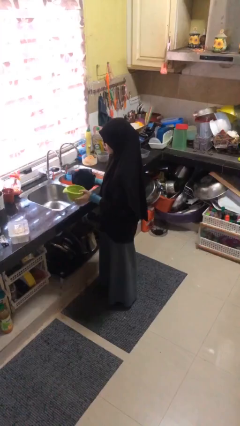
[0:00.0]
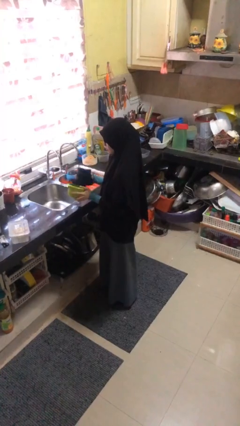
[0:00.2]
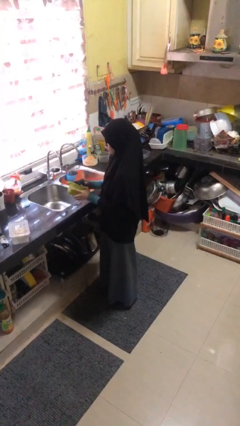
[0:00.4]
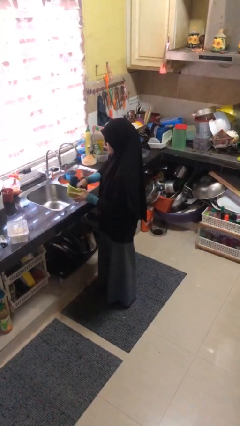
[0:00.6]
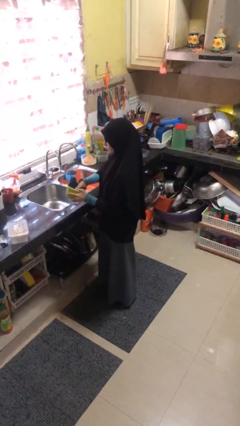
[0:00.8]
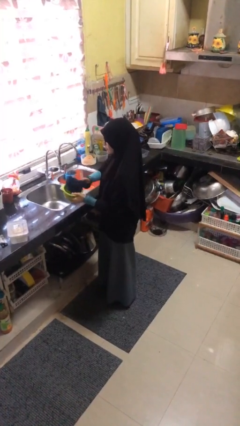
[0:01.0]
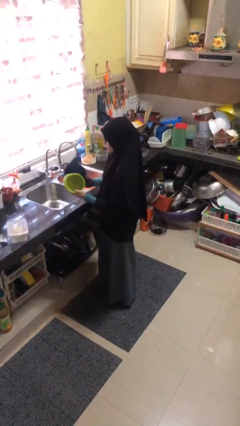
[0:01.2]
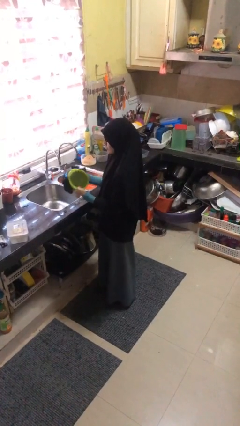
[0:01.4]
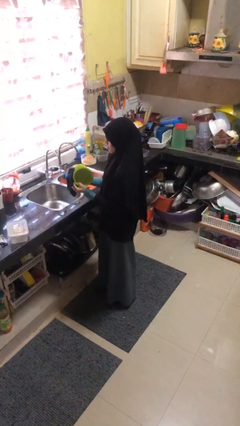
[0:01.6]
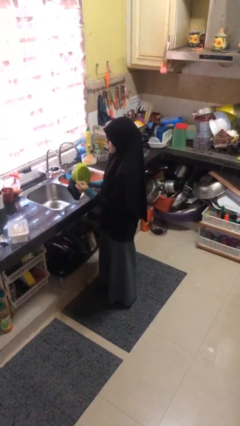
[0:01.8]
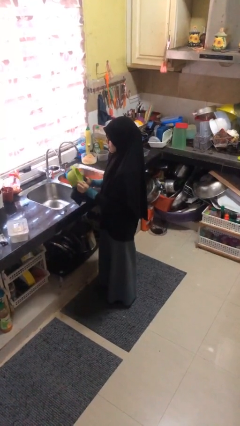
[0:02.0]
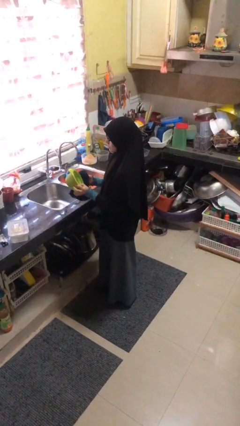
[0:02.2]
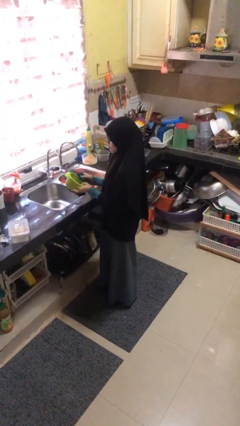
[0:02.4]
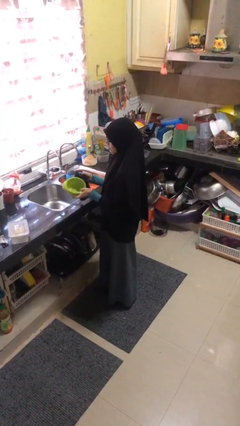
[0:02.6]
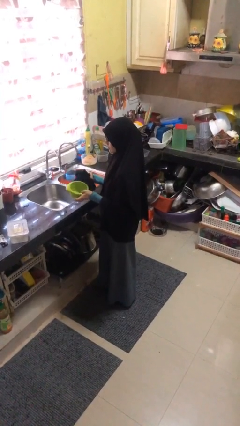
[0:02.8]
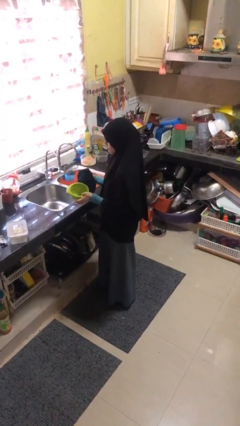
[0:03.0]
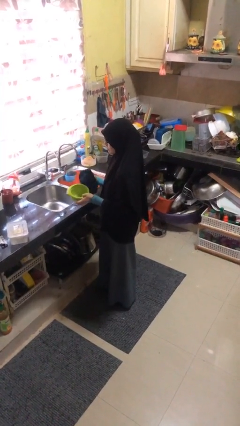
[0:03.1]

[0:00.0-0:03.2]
person dries dish

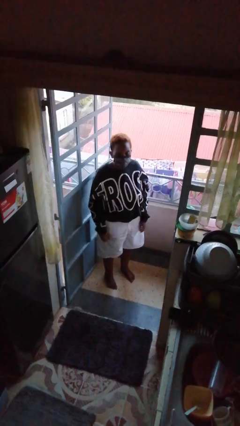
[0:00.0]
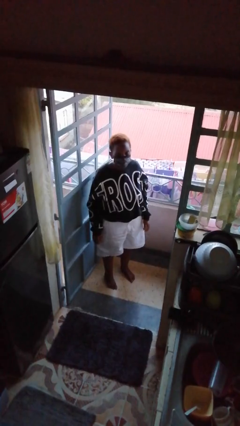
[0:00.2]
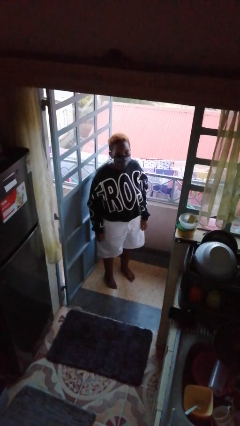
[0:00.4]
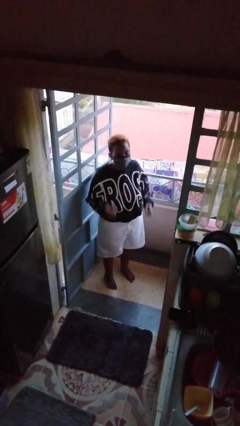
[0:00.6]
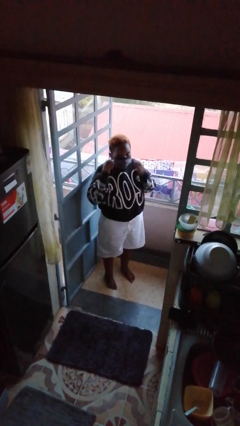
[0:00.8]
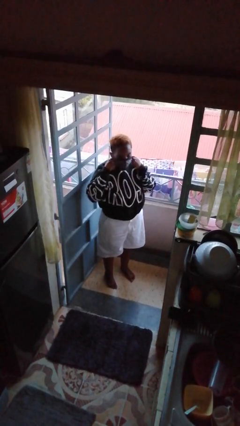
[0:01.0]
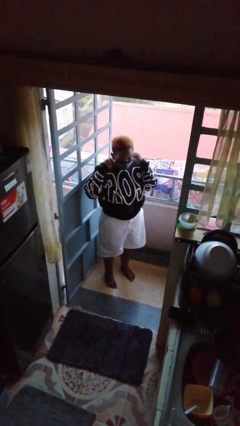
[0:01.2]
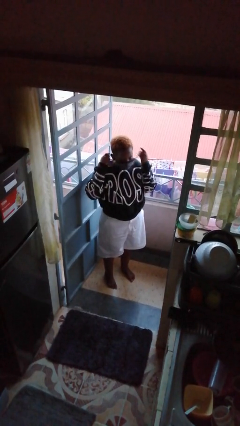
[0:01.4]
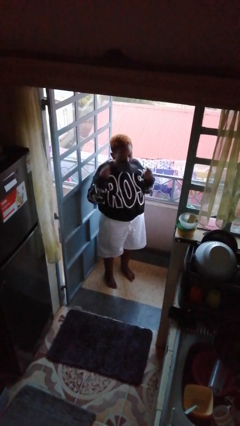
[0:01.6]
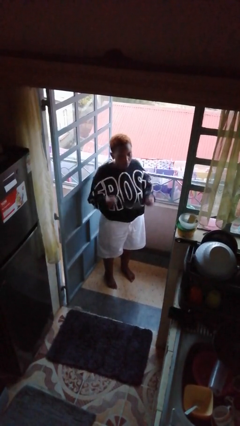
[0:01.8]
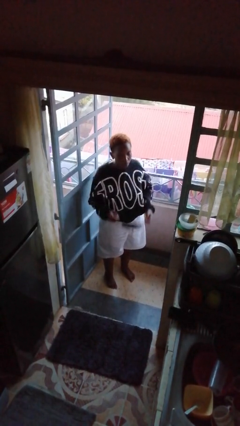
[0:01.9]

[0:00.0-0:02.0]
person takes off facemask

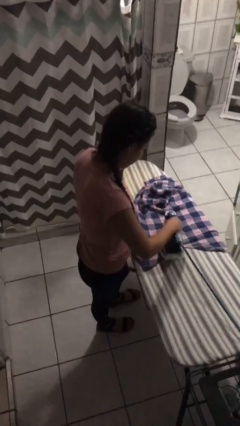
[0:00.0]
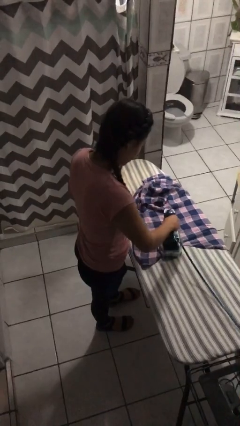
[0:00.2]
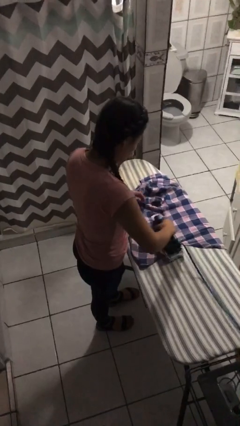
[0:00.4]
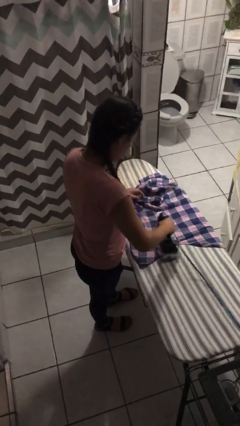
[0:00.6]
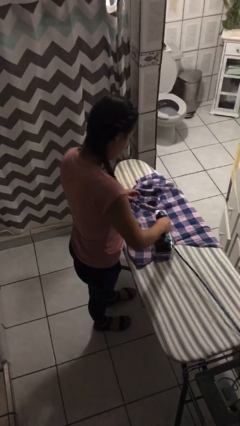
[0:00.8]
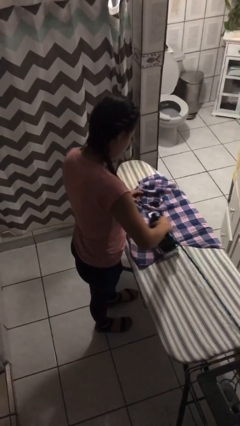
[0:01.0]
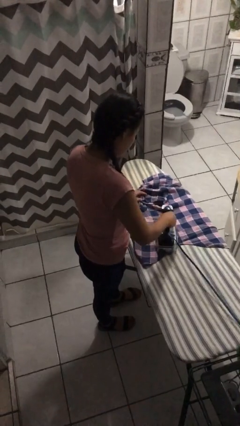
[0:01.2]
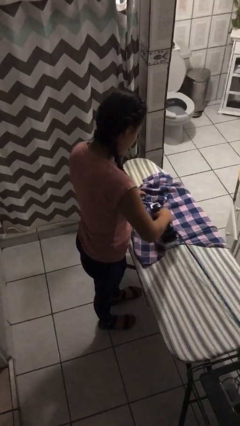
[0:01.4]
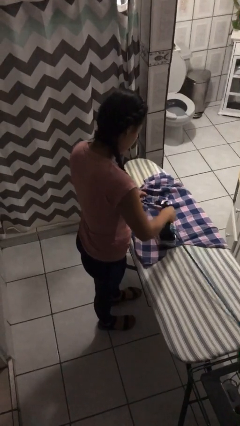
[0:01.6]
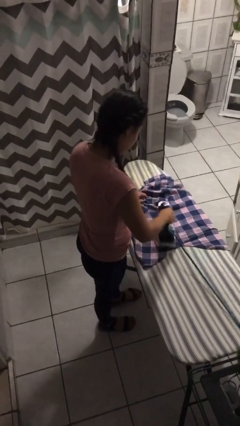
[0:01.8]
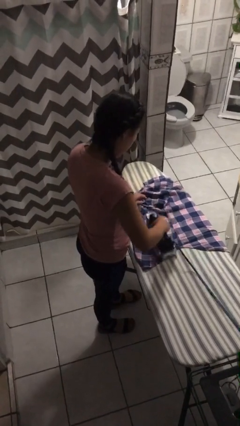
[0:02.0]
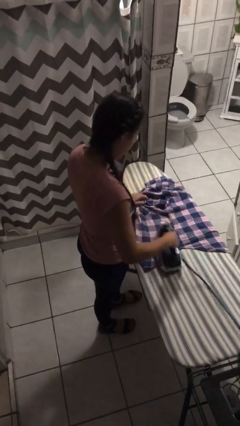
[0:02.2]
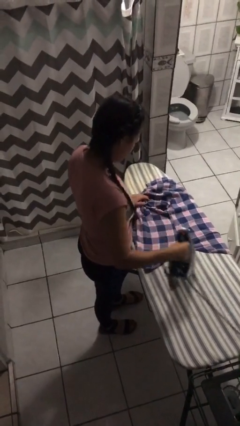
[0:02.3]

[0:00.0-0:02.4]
person irons clothes

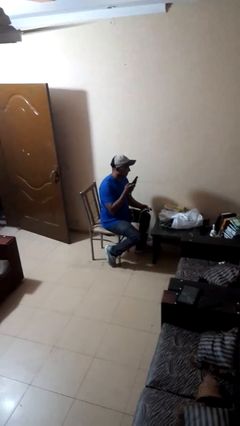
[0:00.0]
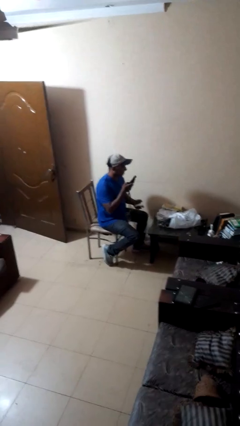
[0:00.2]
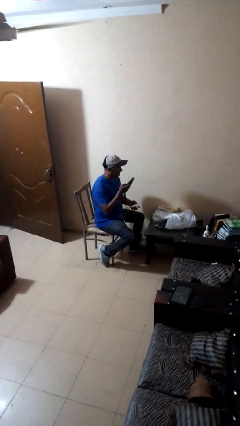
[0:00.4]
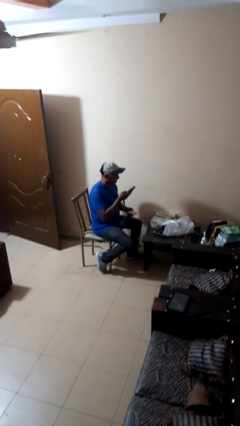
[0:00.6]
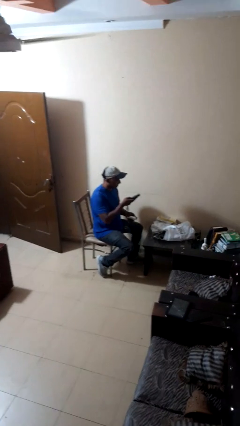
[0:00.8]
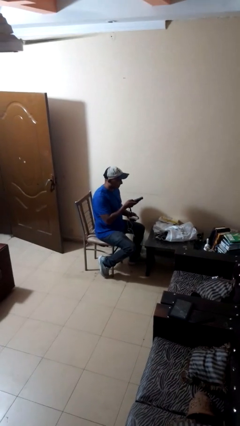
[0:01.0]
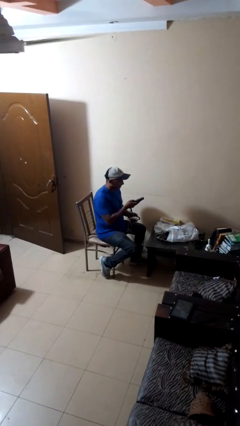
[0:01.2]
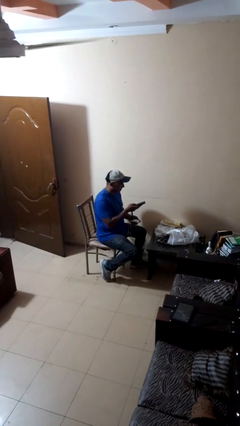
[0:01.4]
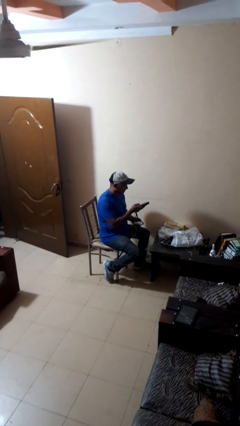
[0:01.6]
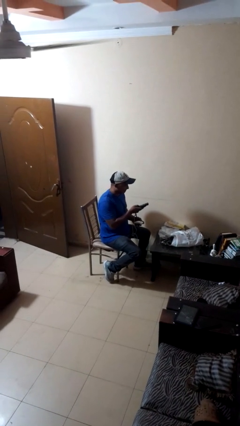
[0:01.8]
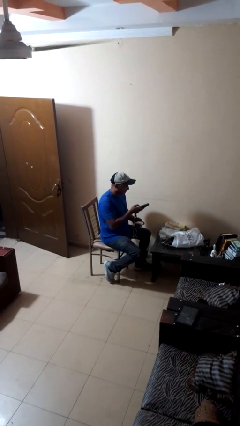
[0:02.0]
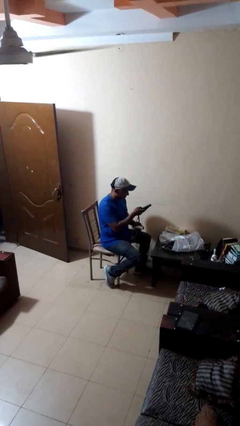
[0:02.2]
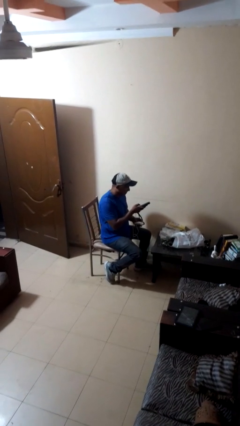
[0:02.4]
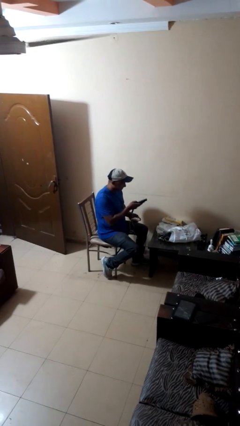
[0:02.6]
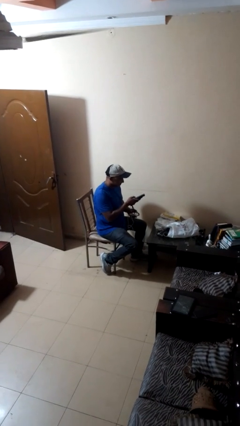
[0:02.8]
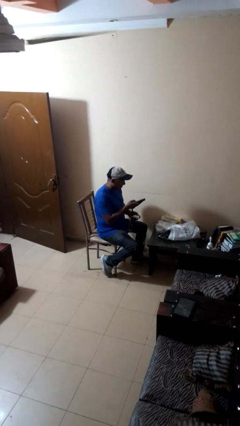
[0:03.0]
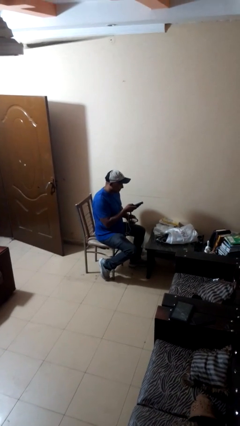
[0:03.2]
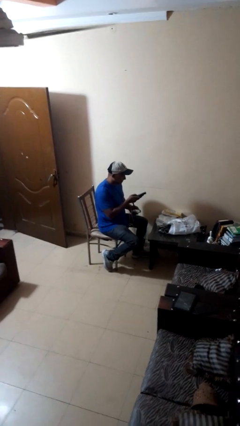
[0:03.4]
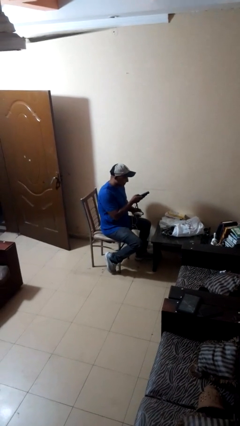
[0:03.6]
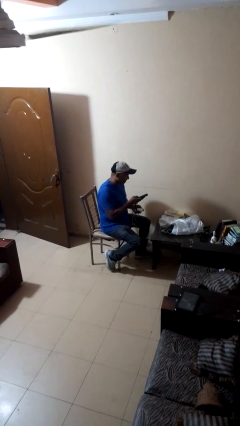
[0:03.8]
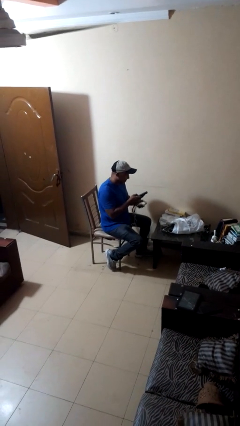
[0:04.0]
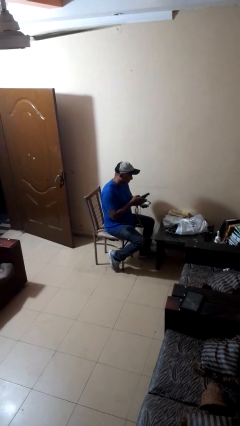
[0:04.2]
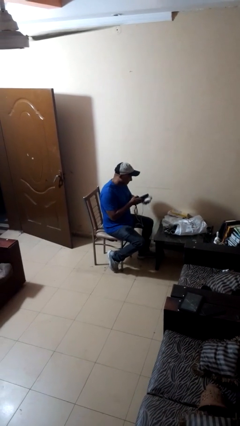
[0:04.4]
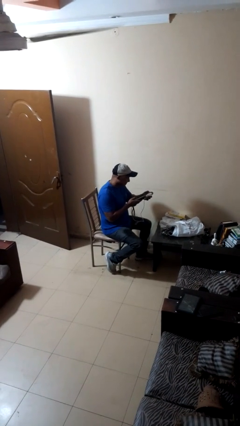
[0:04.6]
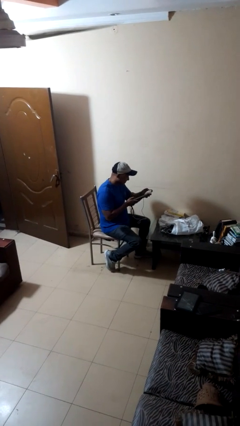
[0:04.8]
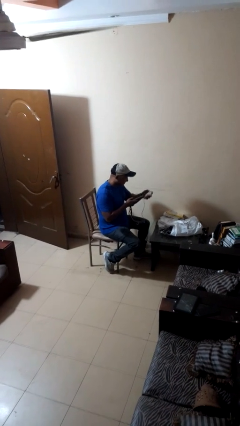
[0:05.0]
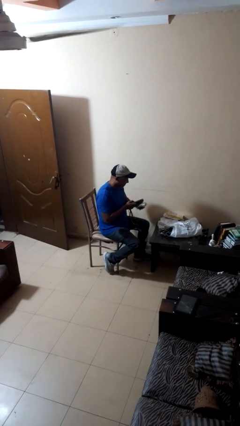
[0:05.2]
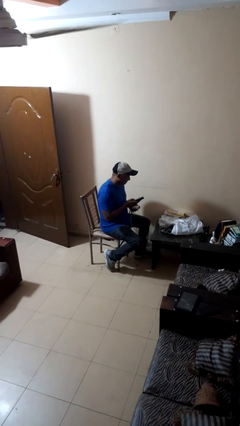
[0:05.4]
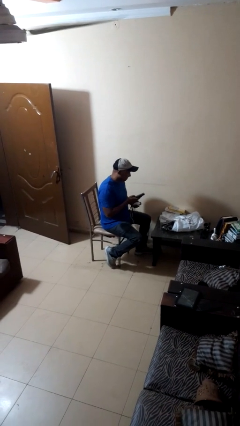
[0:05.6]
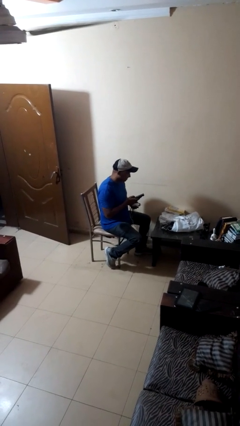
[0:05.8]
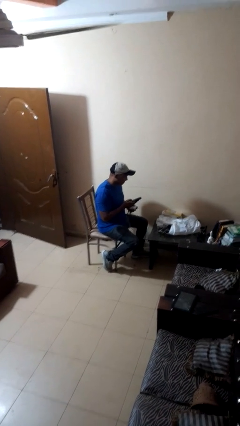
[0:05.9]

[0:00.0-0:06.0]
person interacts with handheld game

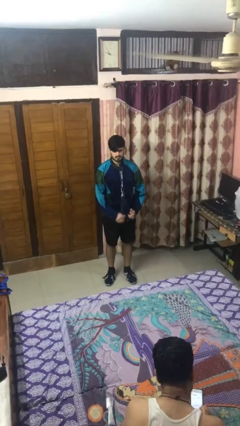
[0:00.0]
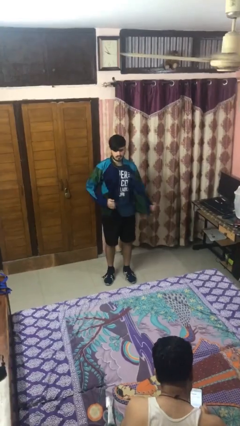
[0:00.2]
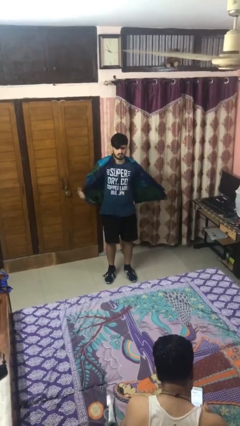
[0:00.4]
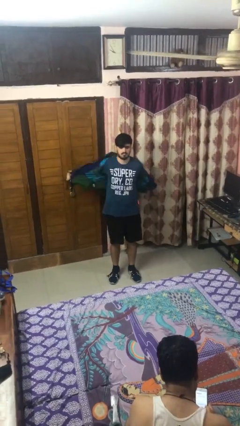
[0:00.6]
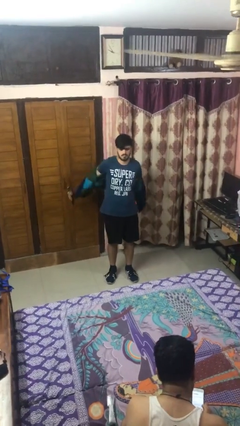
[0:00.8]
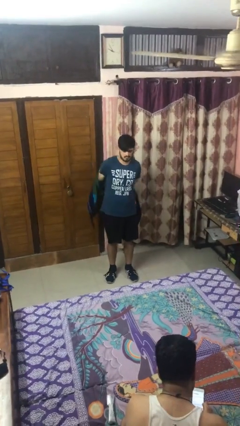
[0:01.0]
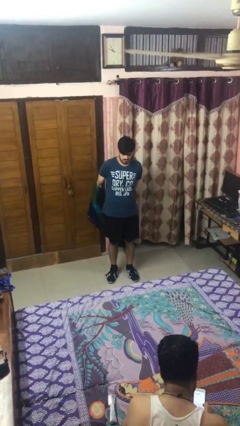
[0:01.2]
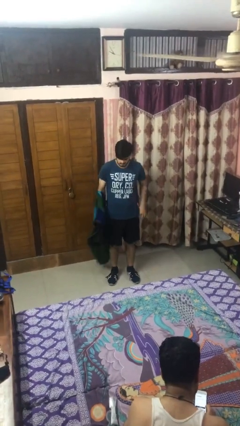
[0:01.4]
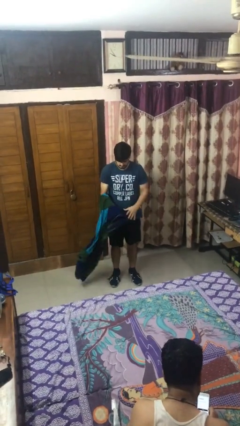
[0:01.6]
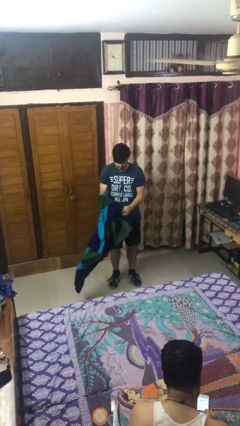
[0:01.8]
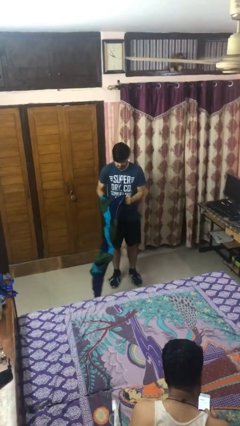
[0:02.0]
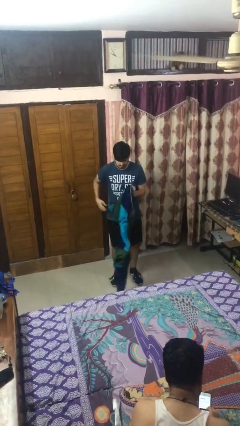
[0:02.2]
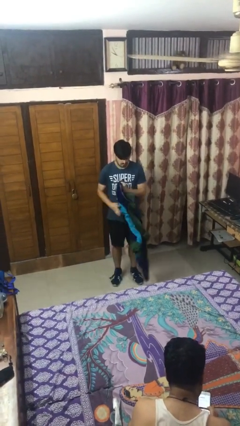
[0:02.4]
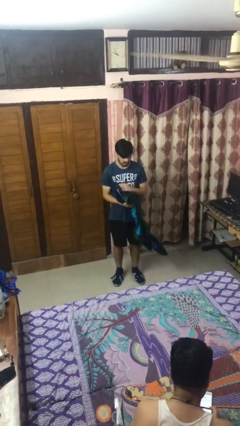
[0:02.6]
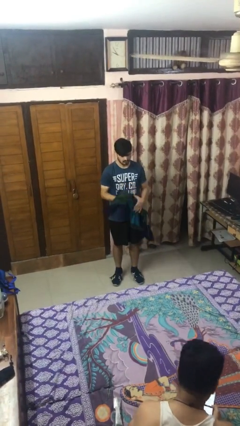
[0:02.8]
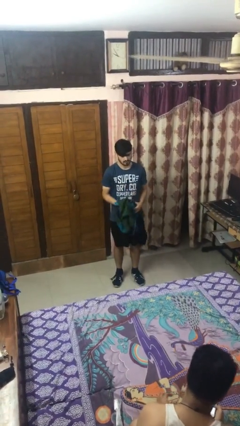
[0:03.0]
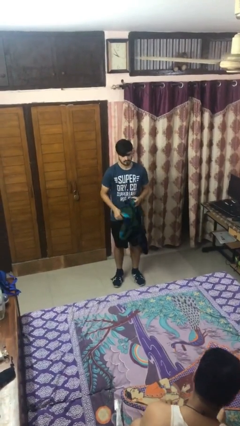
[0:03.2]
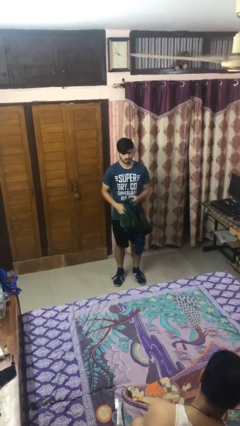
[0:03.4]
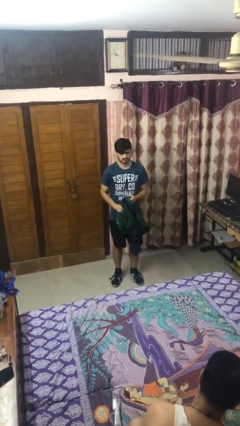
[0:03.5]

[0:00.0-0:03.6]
person takes off jacket

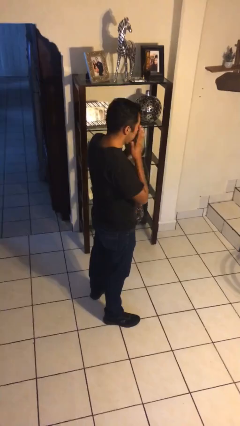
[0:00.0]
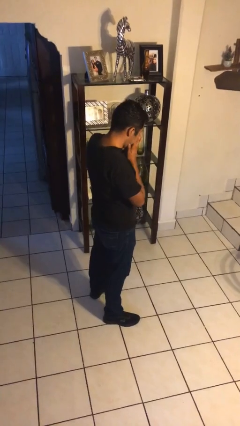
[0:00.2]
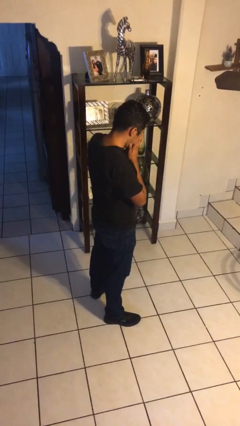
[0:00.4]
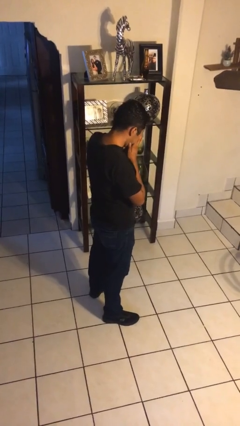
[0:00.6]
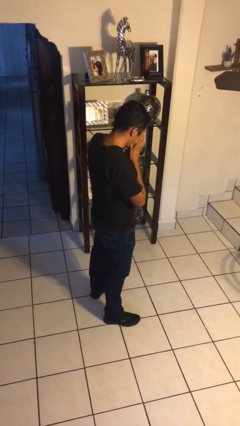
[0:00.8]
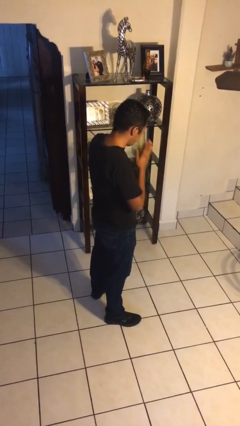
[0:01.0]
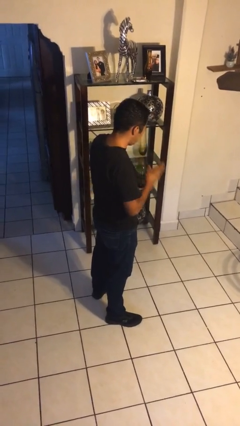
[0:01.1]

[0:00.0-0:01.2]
person sneezes into hand
